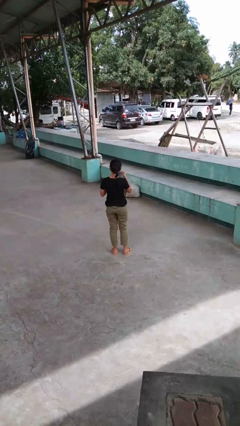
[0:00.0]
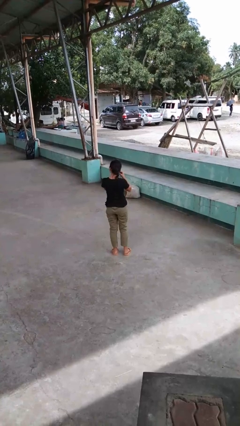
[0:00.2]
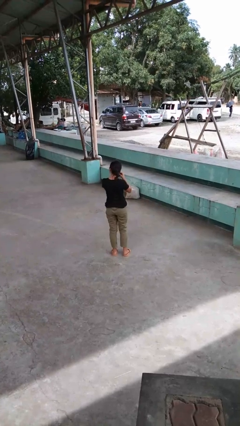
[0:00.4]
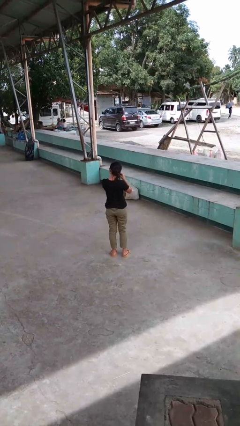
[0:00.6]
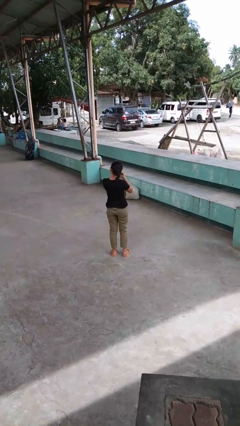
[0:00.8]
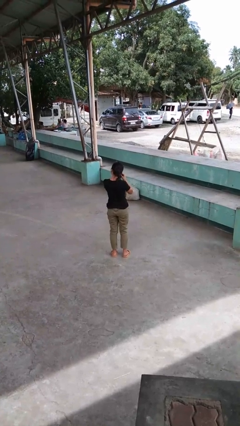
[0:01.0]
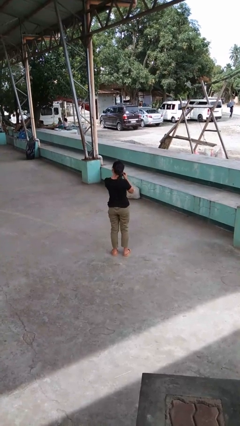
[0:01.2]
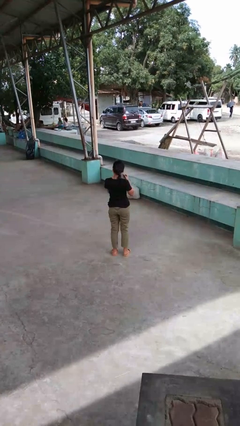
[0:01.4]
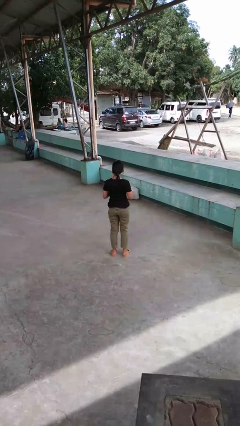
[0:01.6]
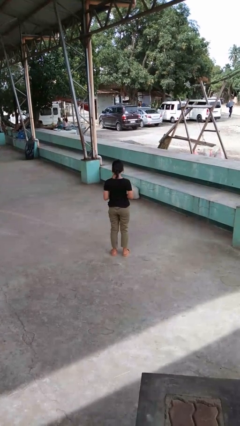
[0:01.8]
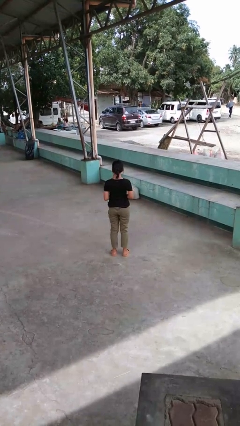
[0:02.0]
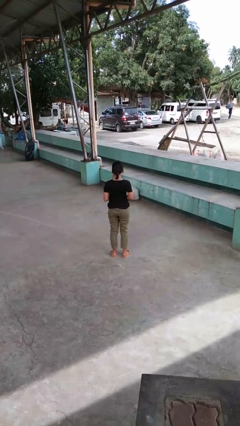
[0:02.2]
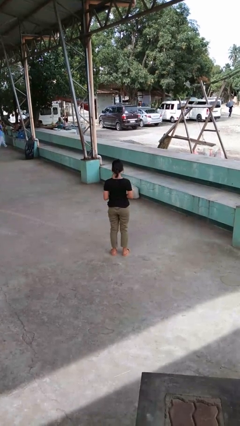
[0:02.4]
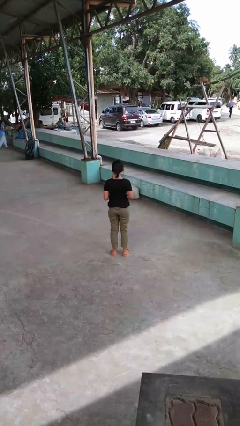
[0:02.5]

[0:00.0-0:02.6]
person takes off earrings

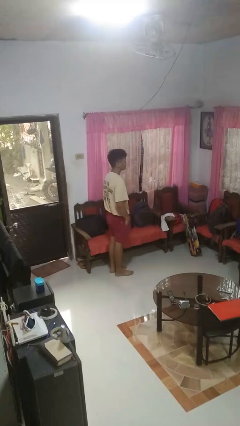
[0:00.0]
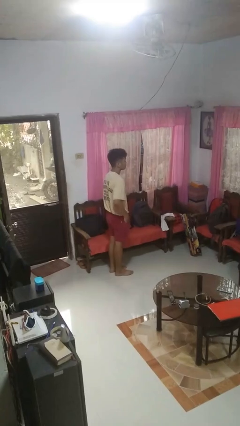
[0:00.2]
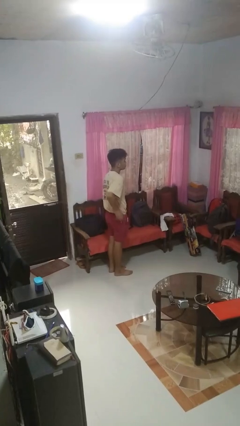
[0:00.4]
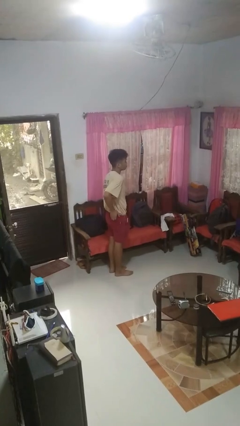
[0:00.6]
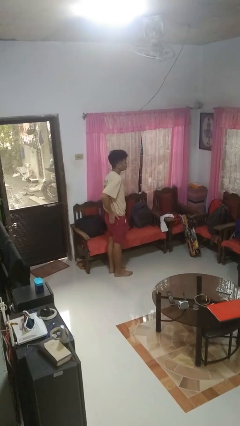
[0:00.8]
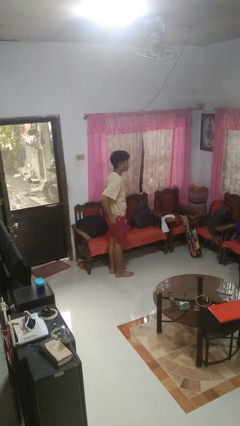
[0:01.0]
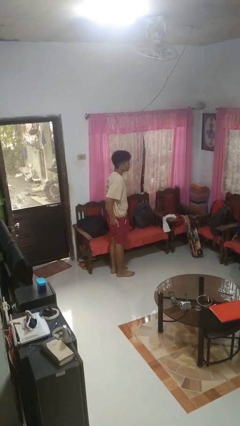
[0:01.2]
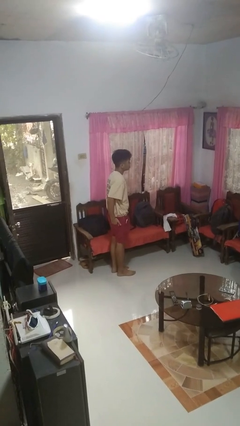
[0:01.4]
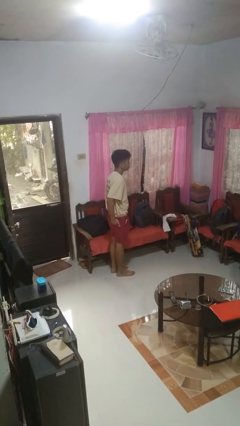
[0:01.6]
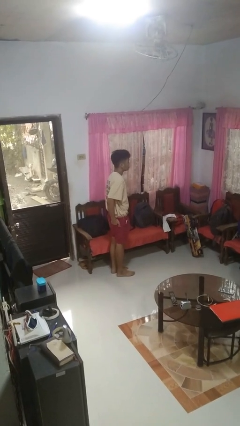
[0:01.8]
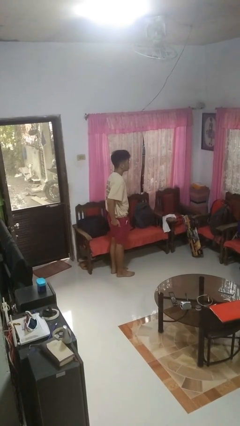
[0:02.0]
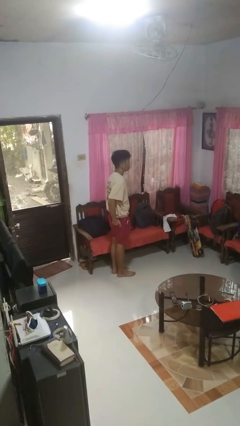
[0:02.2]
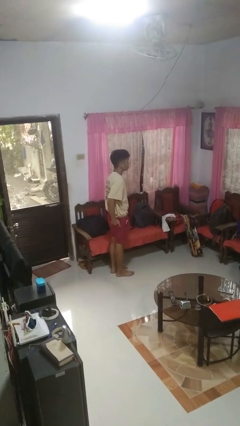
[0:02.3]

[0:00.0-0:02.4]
person puts hands in back pockets

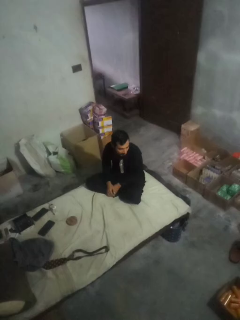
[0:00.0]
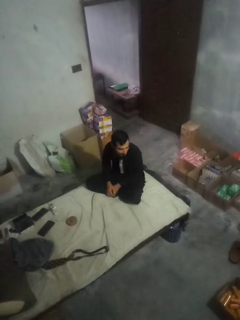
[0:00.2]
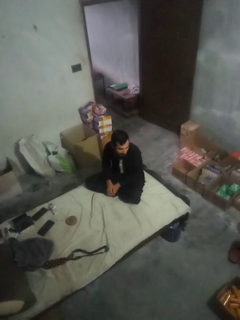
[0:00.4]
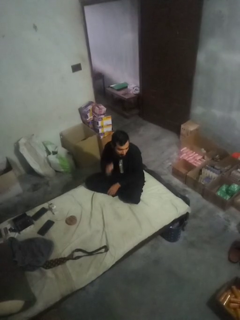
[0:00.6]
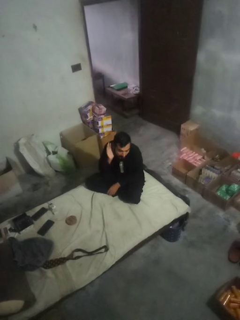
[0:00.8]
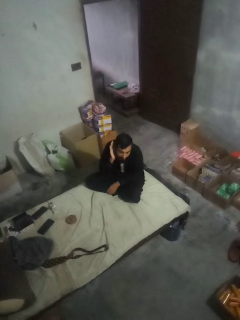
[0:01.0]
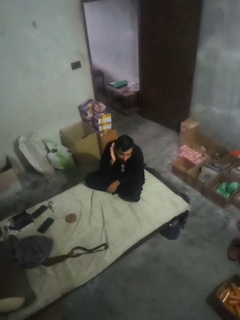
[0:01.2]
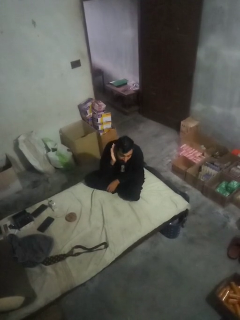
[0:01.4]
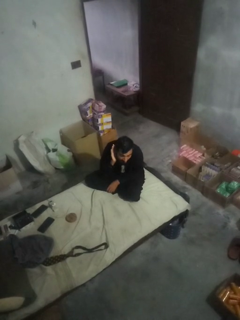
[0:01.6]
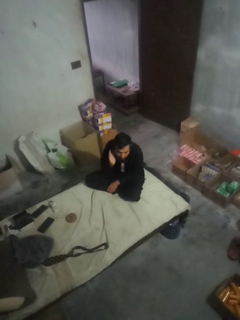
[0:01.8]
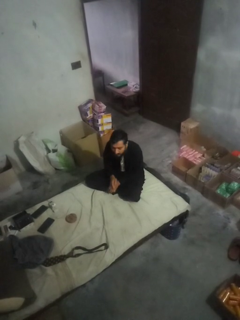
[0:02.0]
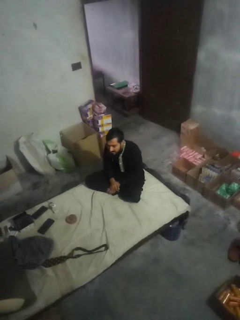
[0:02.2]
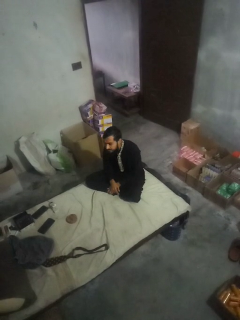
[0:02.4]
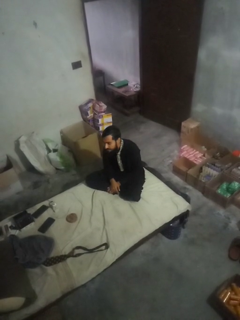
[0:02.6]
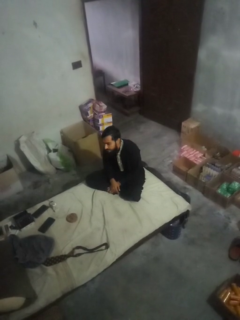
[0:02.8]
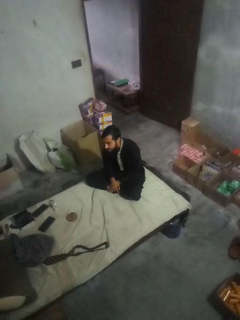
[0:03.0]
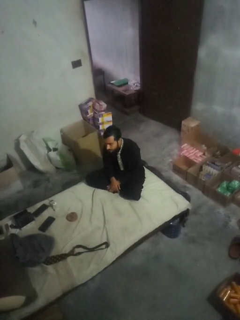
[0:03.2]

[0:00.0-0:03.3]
person gestures listen closely

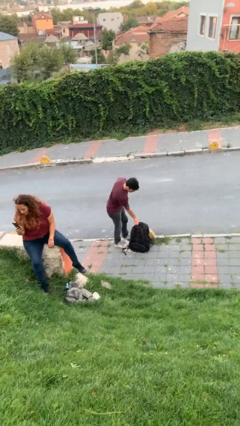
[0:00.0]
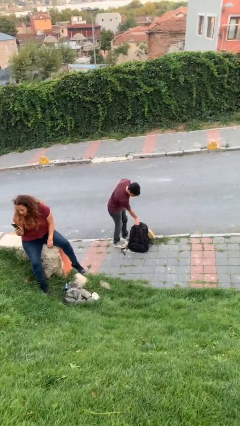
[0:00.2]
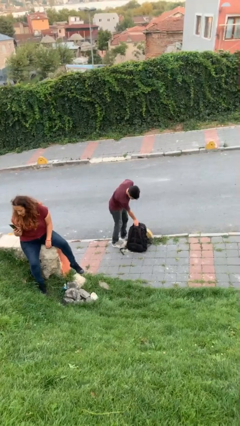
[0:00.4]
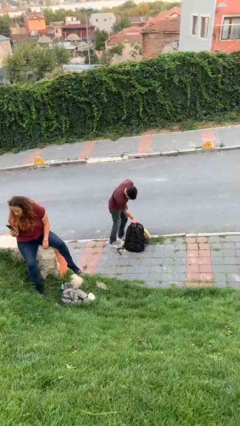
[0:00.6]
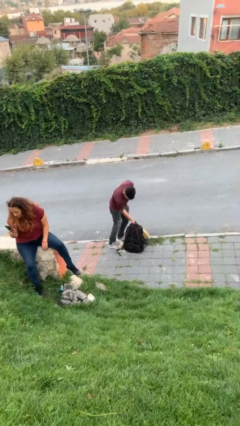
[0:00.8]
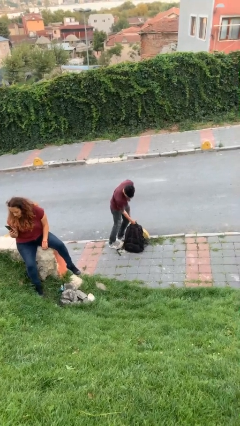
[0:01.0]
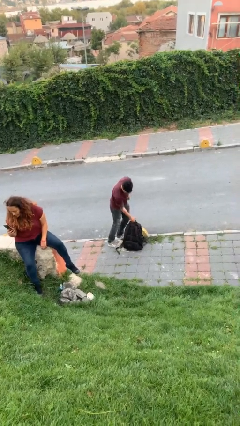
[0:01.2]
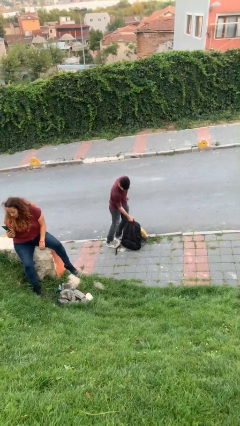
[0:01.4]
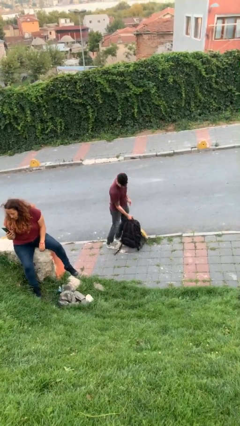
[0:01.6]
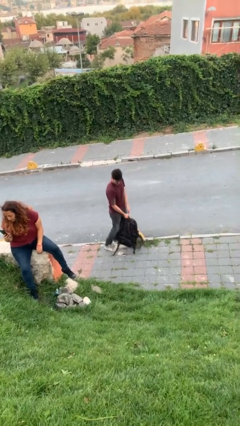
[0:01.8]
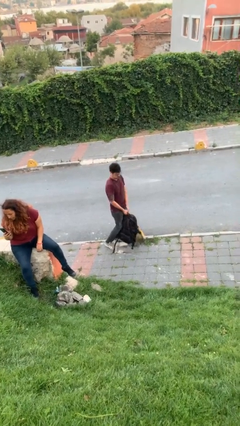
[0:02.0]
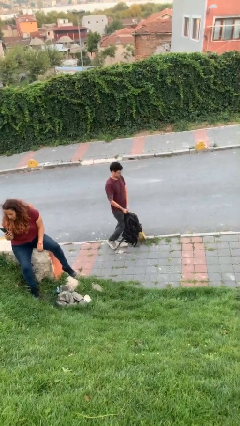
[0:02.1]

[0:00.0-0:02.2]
person picks up object from floor

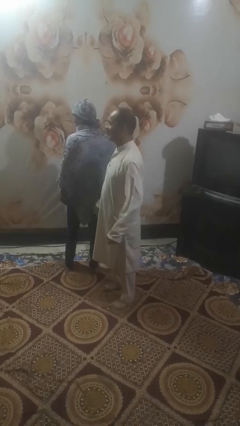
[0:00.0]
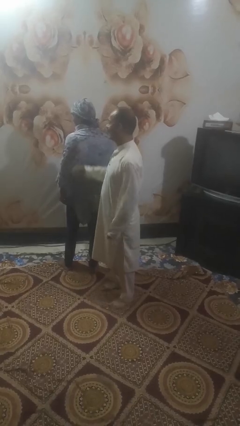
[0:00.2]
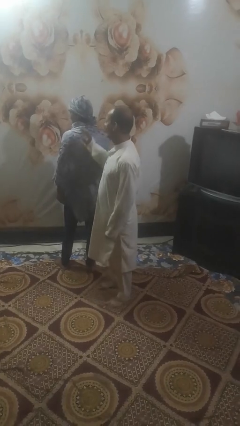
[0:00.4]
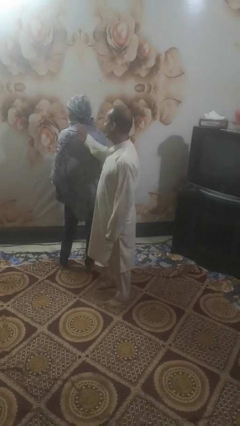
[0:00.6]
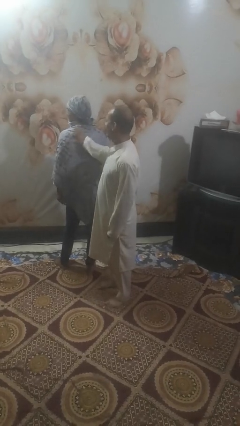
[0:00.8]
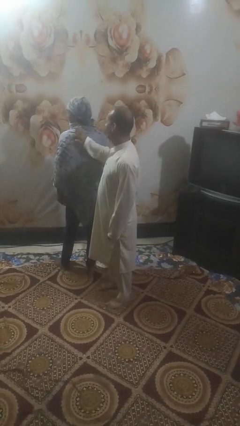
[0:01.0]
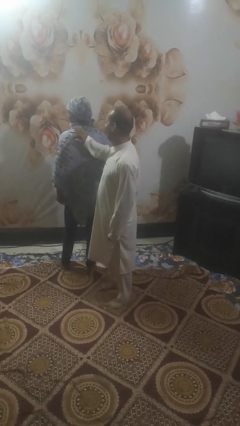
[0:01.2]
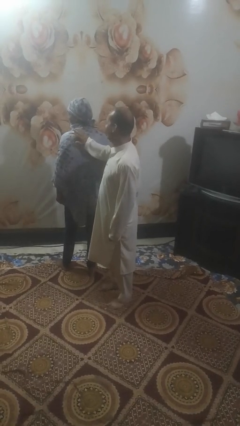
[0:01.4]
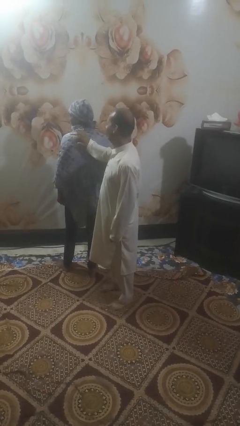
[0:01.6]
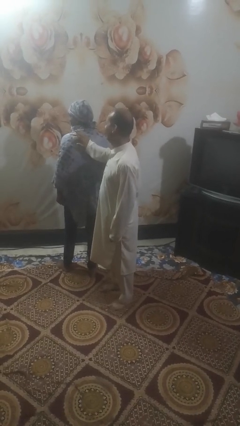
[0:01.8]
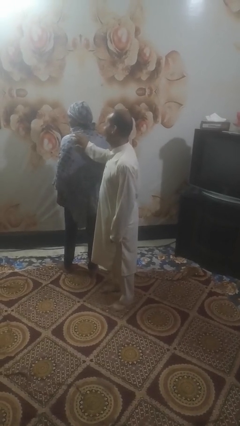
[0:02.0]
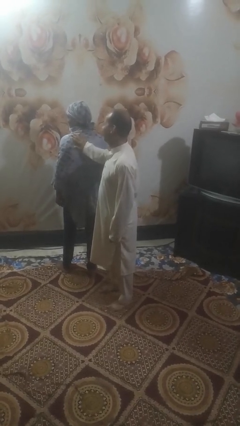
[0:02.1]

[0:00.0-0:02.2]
person touches back of person

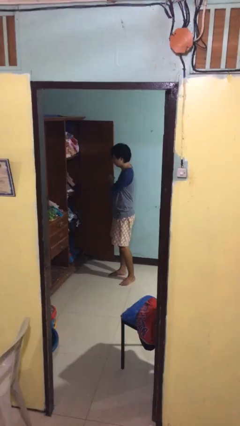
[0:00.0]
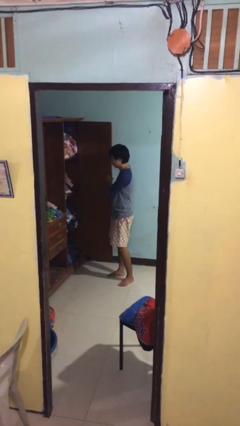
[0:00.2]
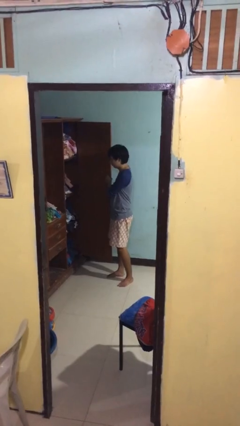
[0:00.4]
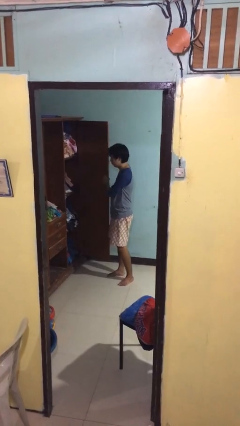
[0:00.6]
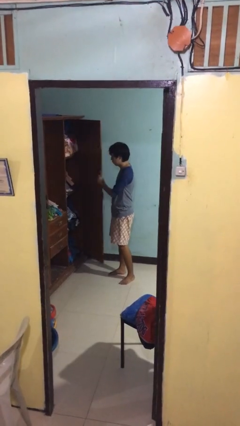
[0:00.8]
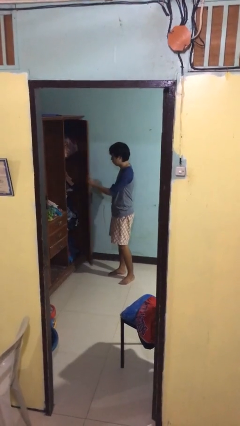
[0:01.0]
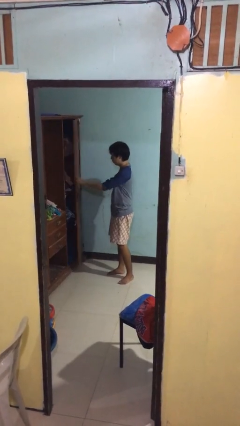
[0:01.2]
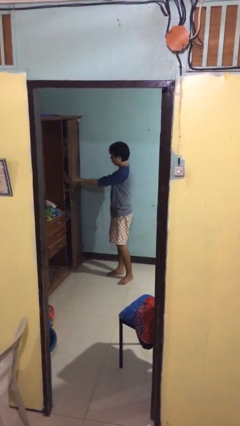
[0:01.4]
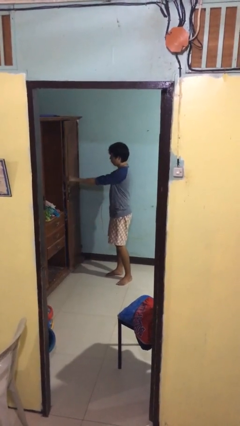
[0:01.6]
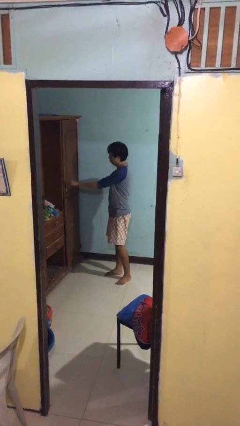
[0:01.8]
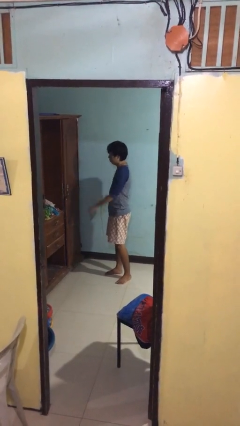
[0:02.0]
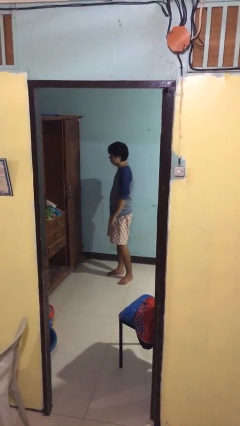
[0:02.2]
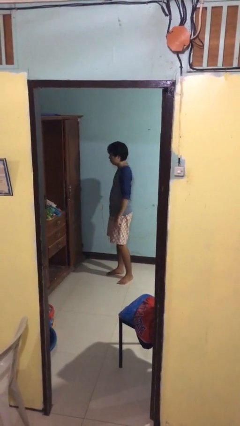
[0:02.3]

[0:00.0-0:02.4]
person closes closet door

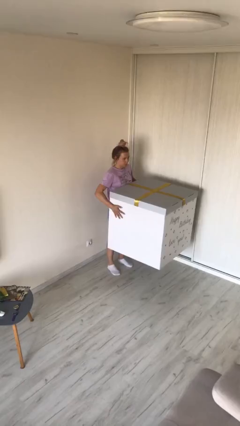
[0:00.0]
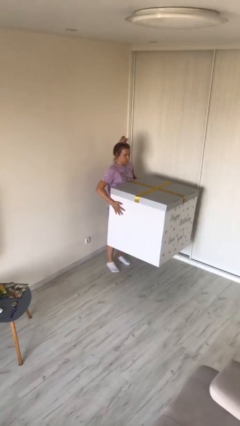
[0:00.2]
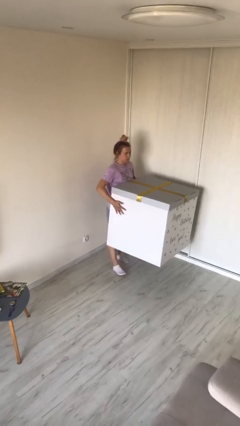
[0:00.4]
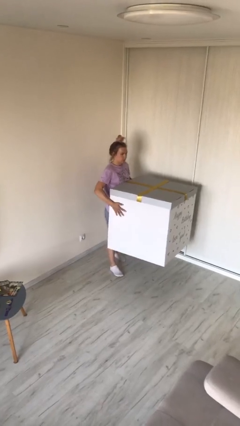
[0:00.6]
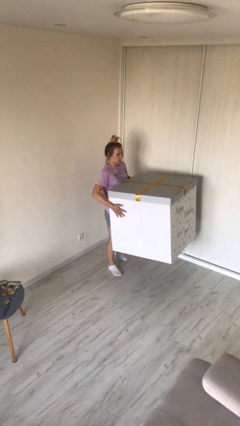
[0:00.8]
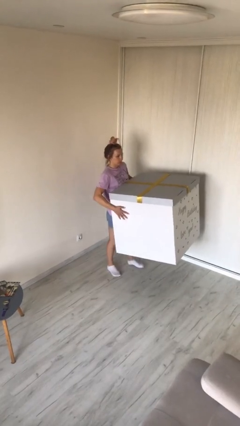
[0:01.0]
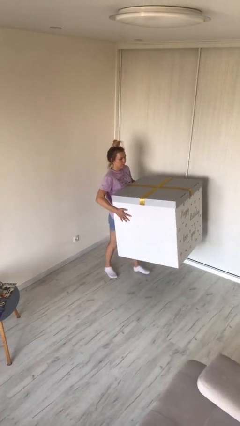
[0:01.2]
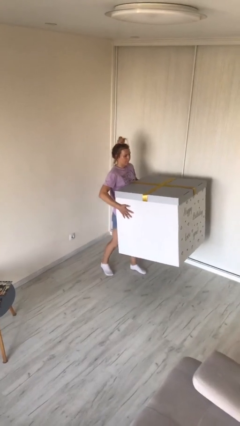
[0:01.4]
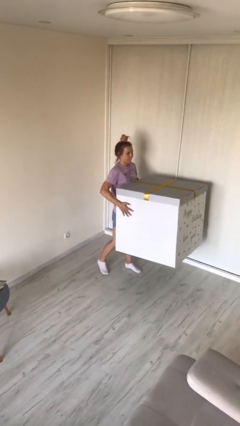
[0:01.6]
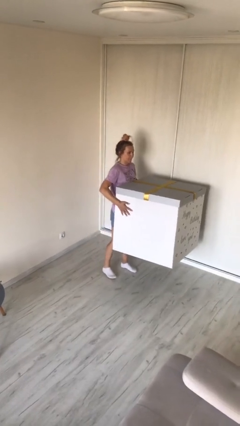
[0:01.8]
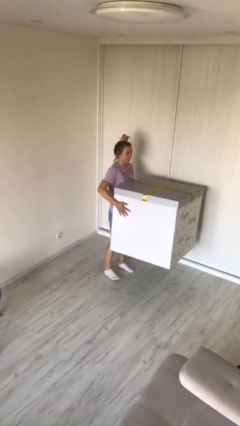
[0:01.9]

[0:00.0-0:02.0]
person carries furniture

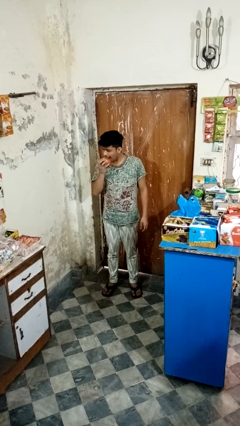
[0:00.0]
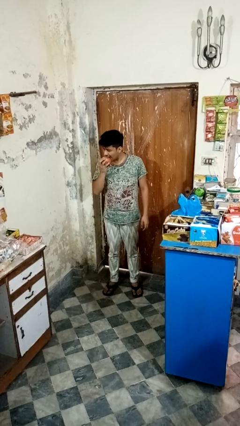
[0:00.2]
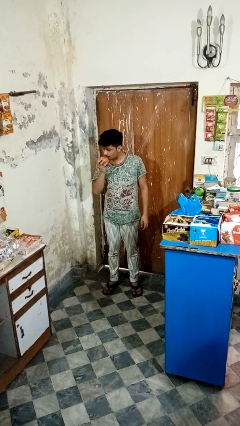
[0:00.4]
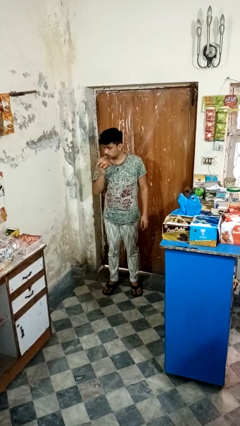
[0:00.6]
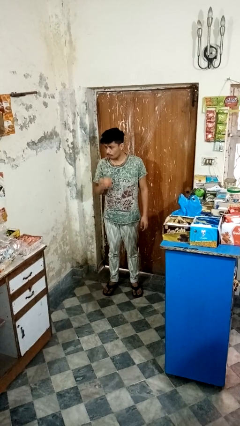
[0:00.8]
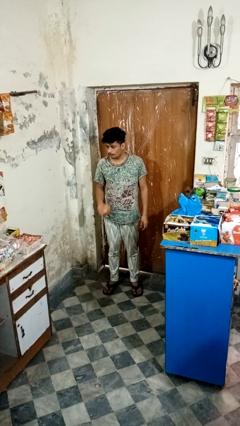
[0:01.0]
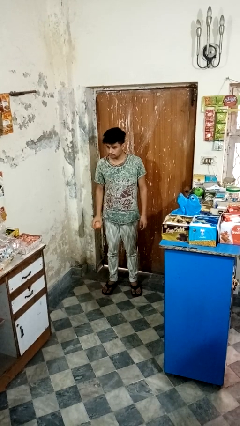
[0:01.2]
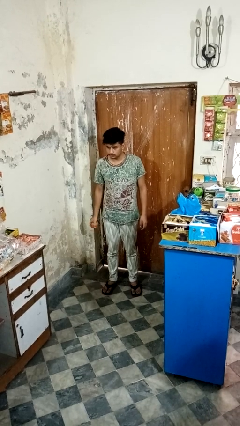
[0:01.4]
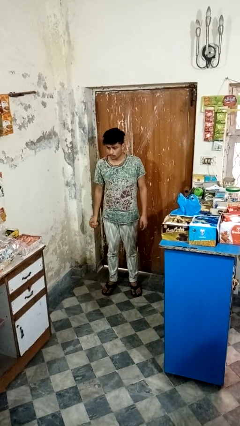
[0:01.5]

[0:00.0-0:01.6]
person eats apple
